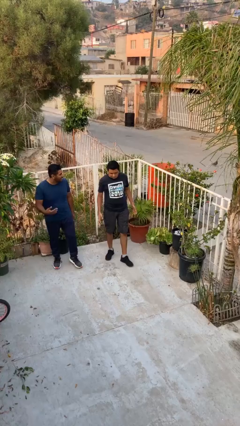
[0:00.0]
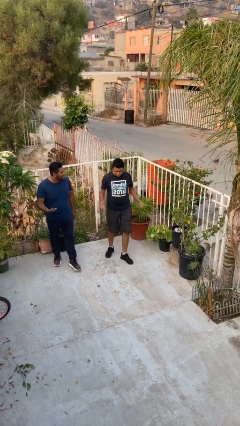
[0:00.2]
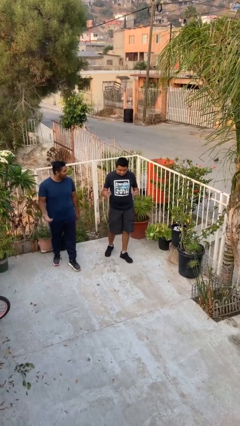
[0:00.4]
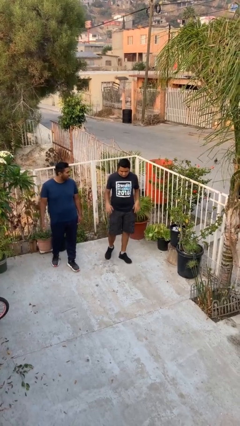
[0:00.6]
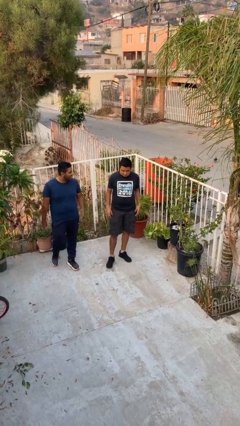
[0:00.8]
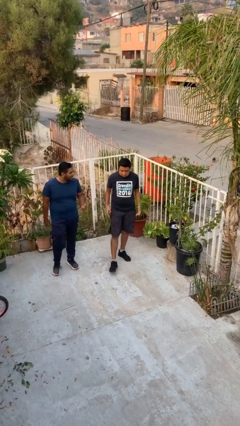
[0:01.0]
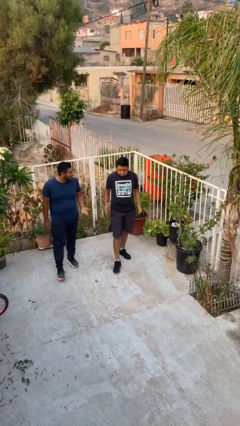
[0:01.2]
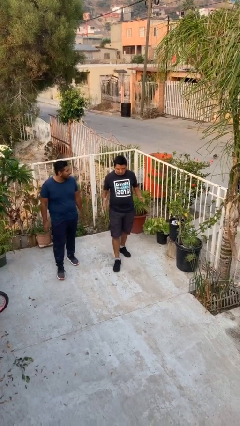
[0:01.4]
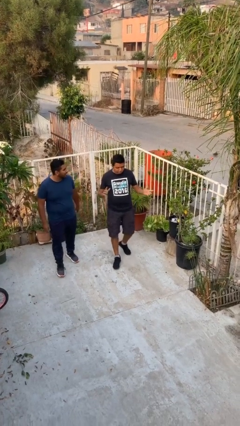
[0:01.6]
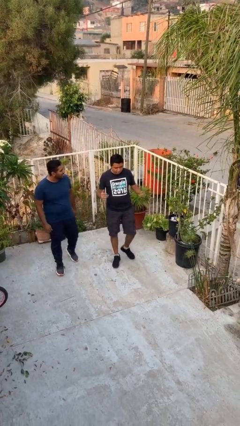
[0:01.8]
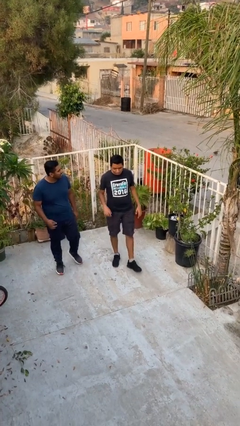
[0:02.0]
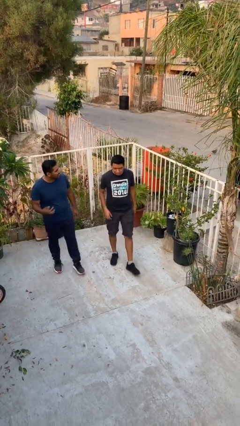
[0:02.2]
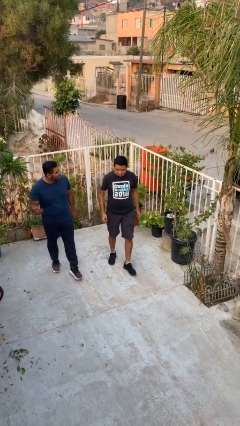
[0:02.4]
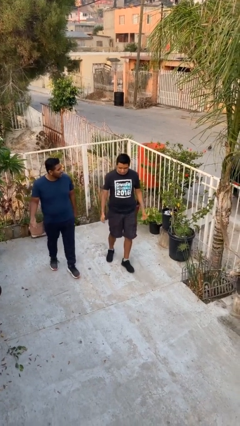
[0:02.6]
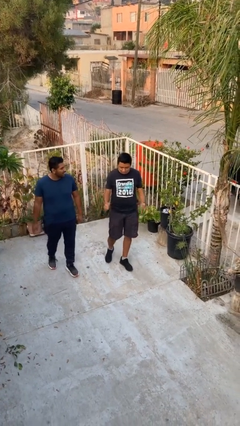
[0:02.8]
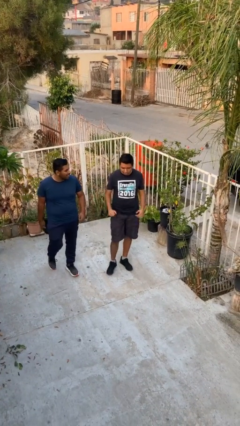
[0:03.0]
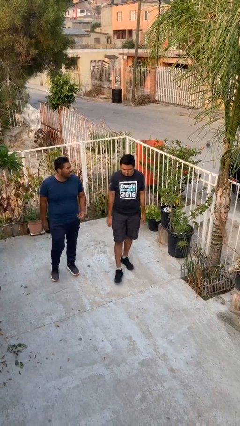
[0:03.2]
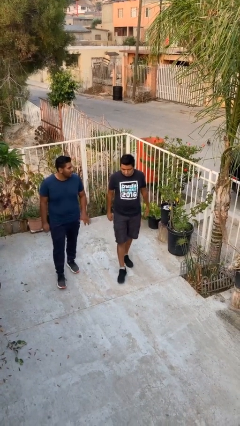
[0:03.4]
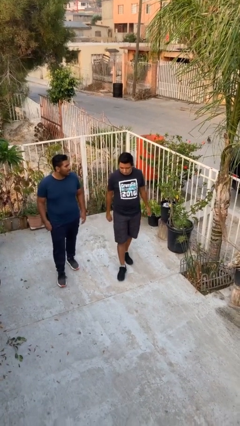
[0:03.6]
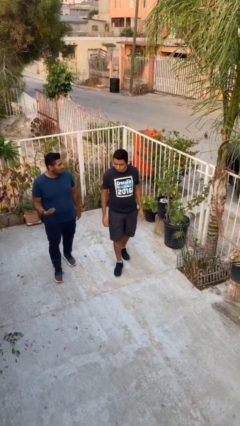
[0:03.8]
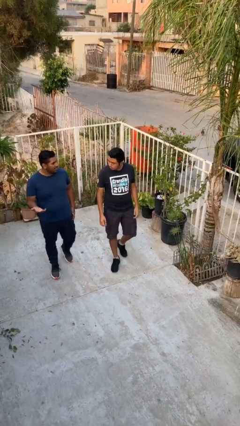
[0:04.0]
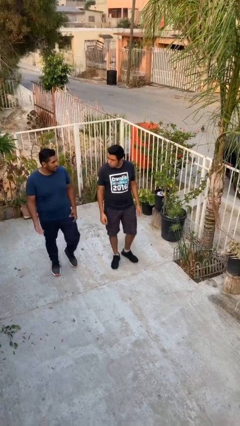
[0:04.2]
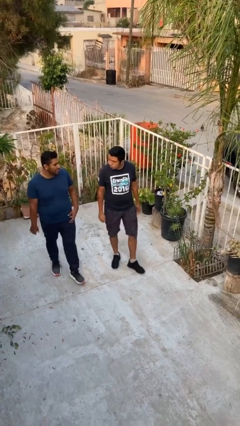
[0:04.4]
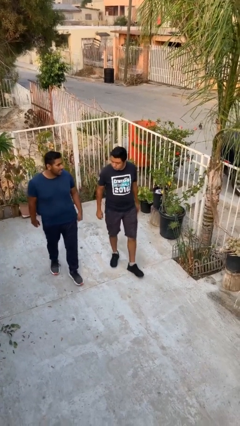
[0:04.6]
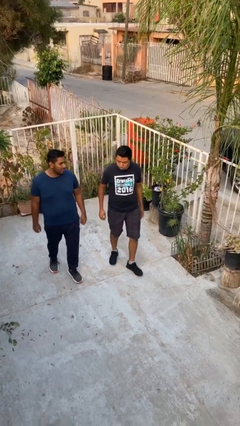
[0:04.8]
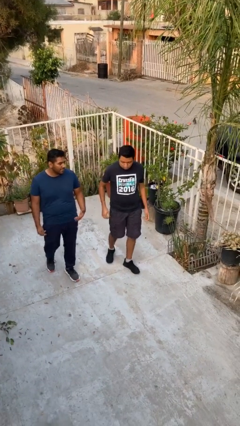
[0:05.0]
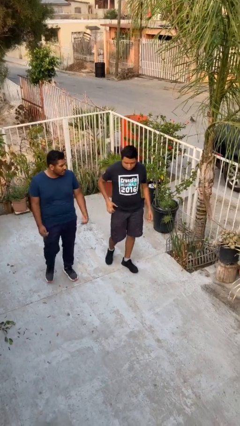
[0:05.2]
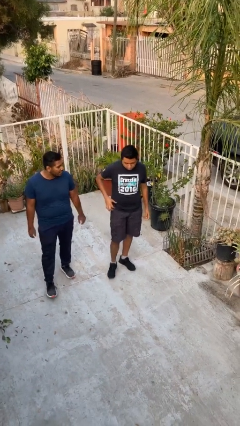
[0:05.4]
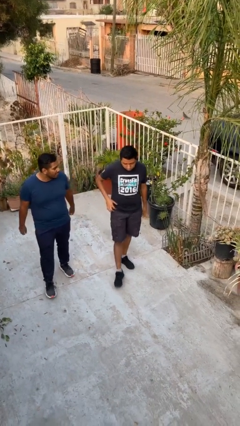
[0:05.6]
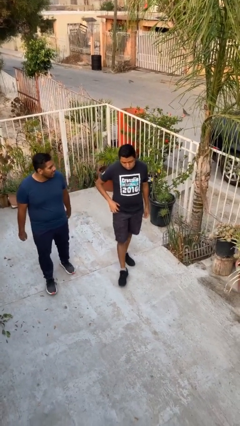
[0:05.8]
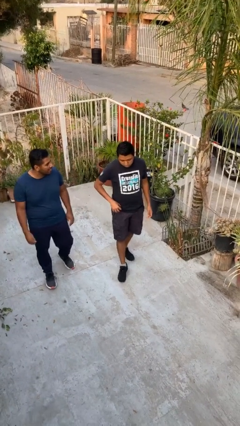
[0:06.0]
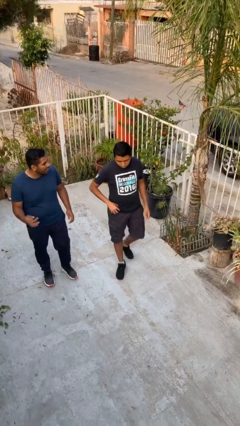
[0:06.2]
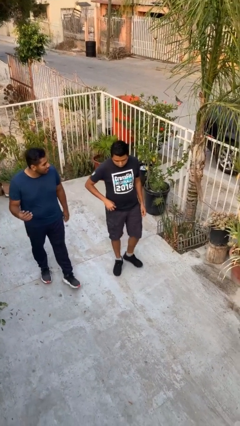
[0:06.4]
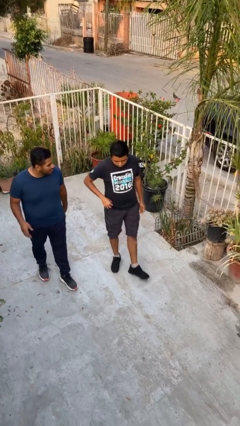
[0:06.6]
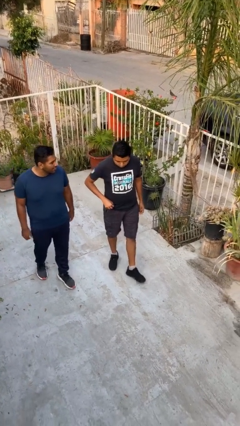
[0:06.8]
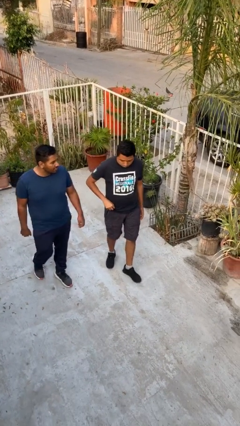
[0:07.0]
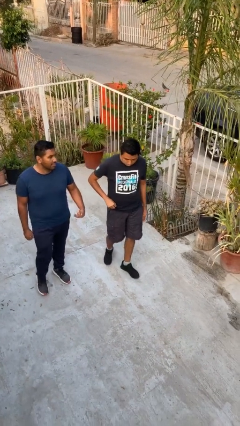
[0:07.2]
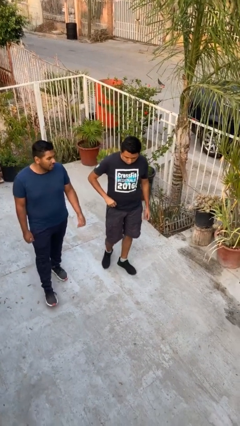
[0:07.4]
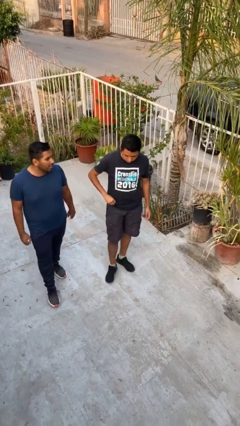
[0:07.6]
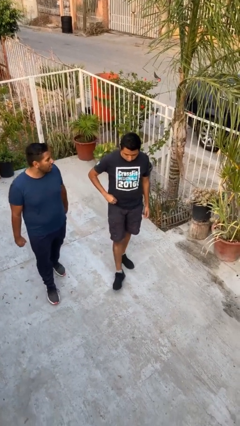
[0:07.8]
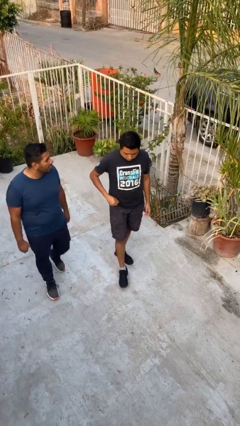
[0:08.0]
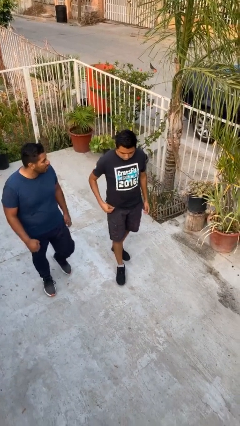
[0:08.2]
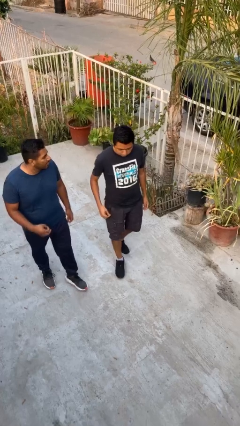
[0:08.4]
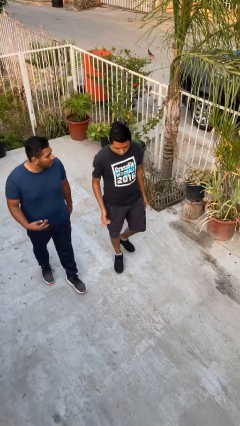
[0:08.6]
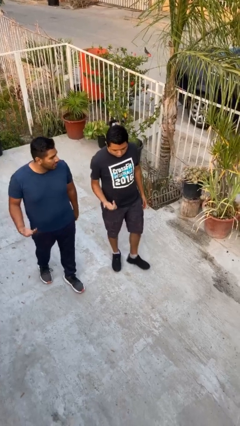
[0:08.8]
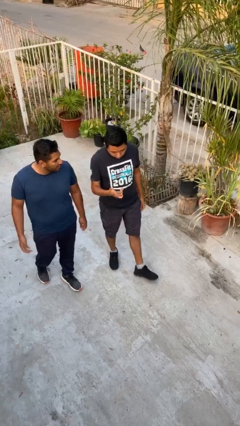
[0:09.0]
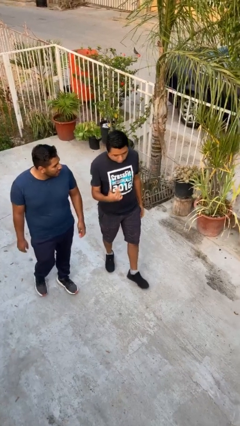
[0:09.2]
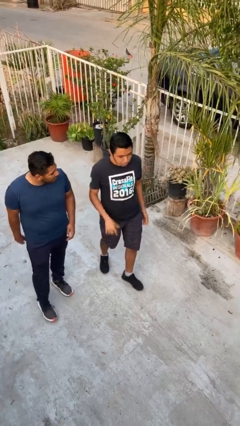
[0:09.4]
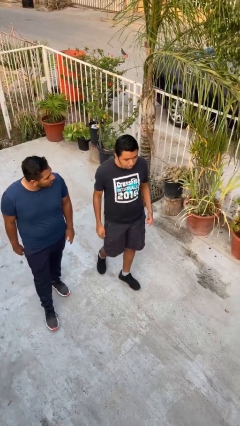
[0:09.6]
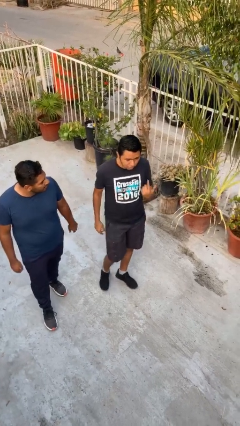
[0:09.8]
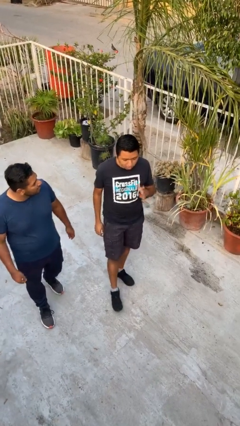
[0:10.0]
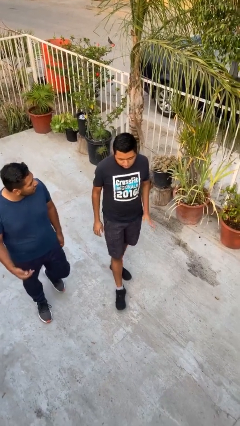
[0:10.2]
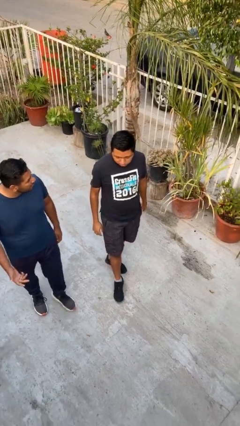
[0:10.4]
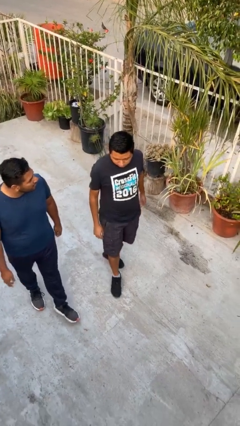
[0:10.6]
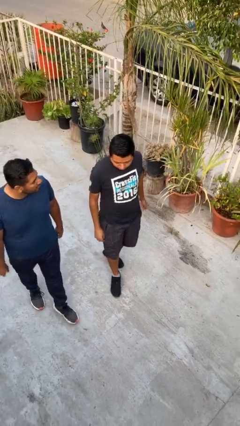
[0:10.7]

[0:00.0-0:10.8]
person talks to person

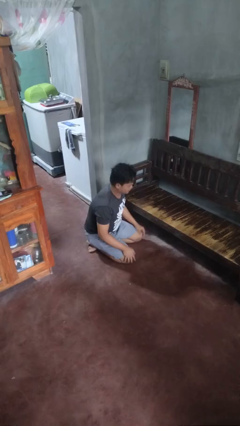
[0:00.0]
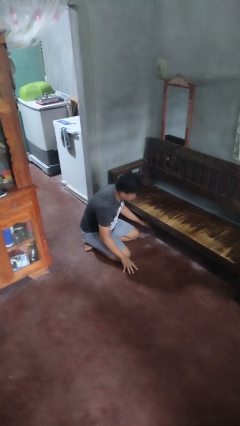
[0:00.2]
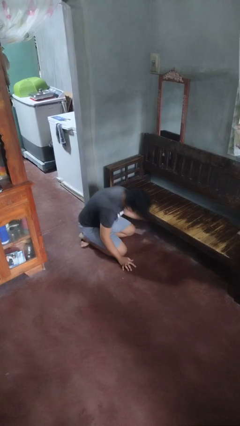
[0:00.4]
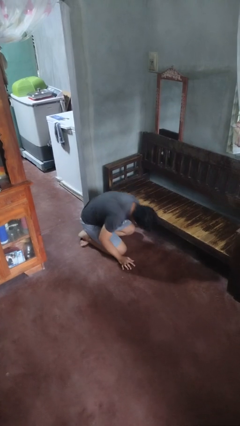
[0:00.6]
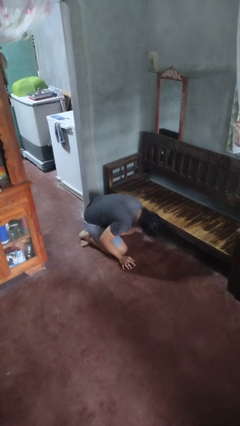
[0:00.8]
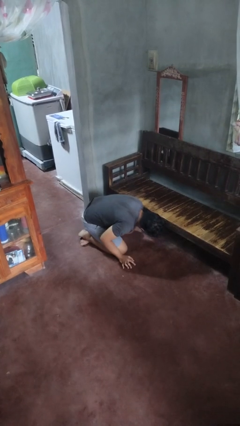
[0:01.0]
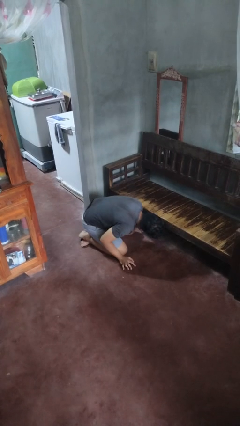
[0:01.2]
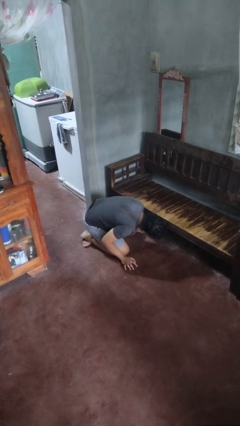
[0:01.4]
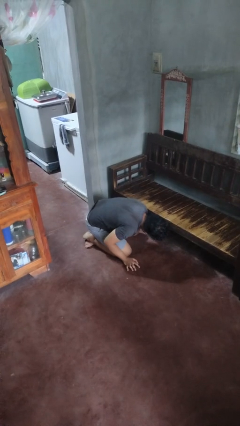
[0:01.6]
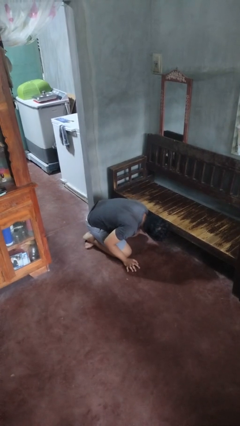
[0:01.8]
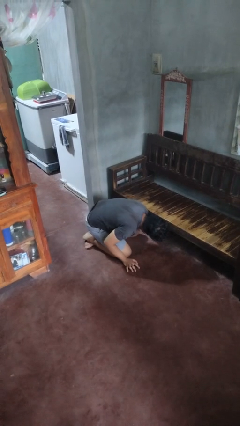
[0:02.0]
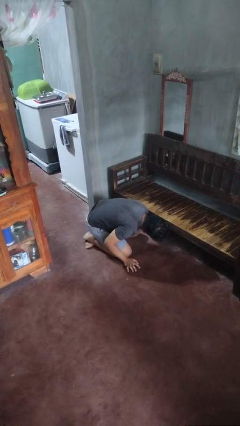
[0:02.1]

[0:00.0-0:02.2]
person searches under couch

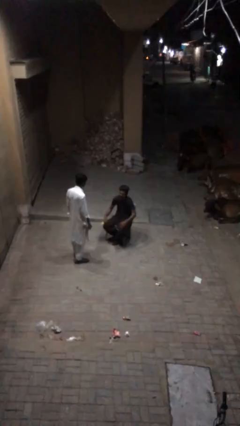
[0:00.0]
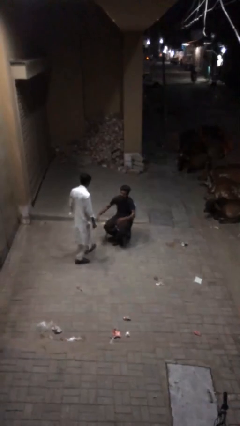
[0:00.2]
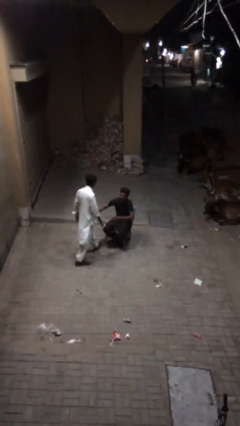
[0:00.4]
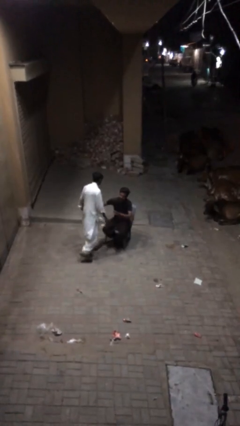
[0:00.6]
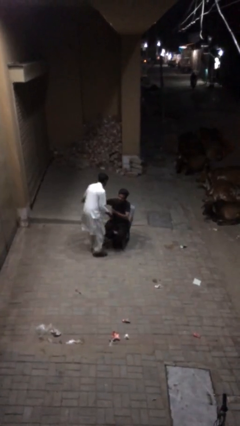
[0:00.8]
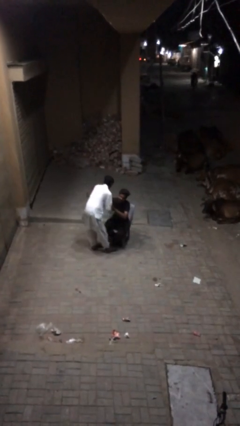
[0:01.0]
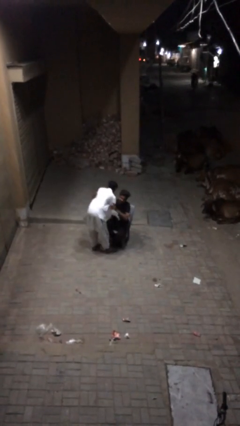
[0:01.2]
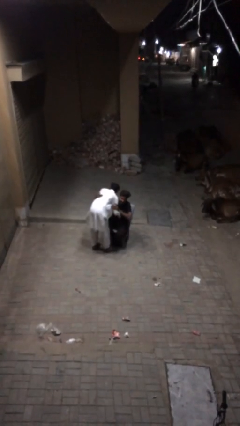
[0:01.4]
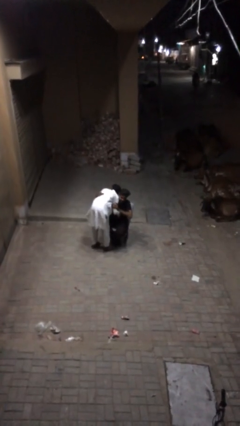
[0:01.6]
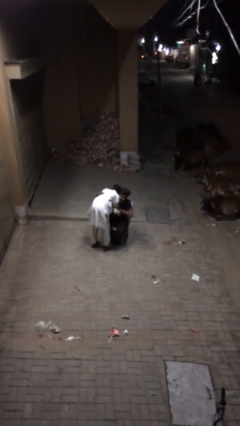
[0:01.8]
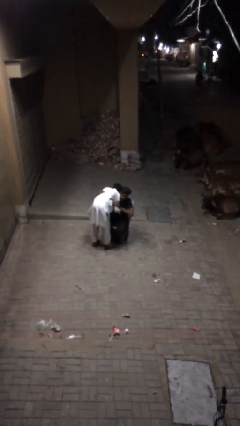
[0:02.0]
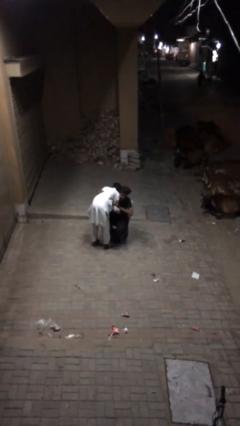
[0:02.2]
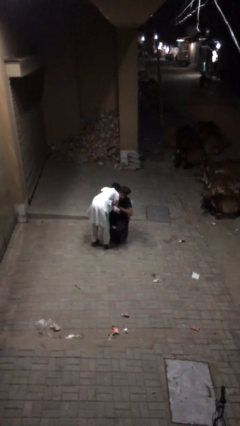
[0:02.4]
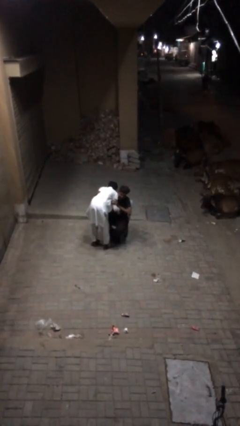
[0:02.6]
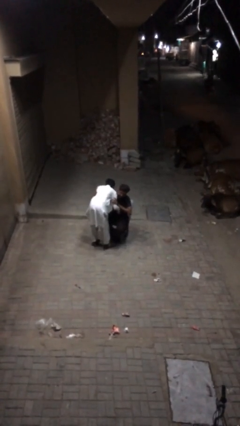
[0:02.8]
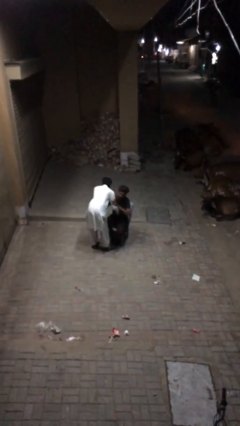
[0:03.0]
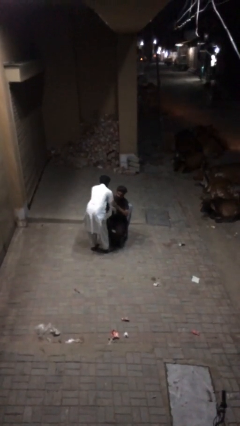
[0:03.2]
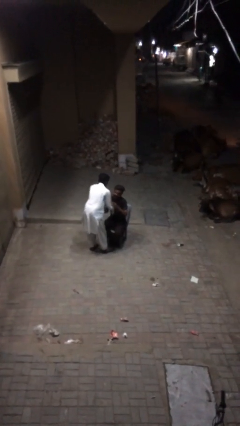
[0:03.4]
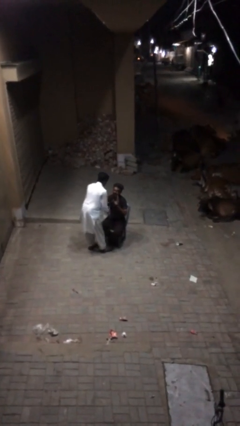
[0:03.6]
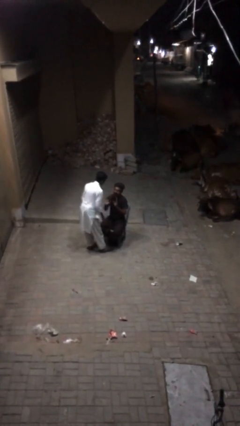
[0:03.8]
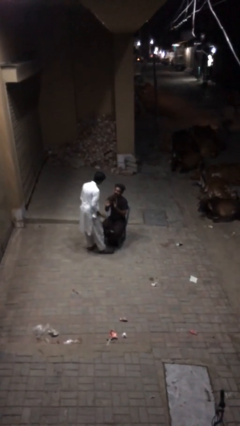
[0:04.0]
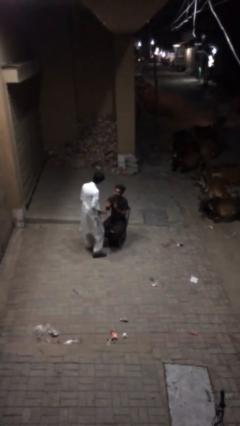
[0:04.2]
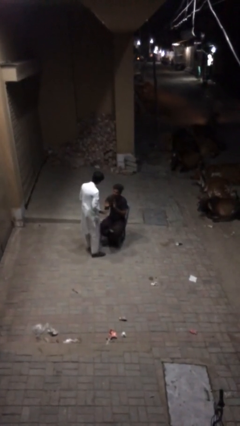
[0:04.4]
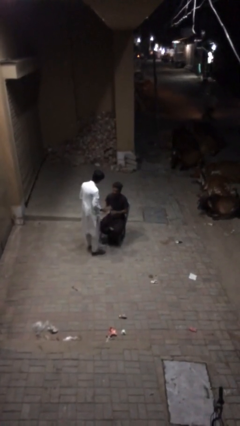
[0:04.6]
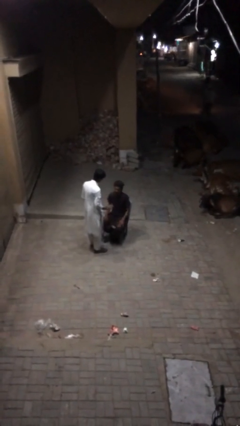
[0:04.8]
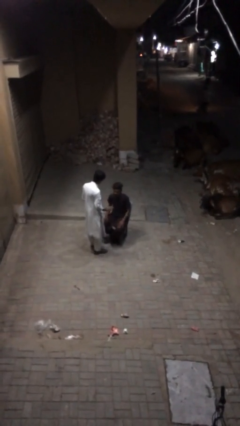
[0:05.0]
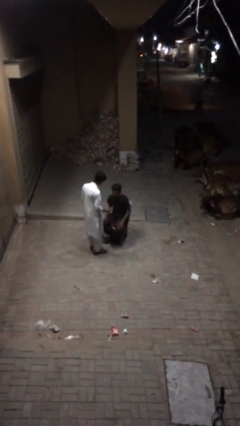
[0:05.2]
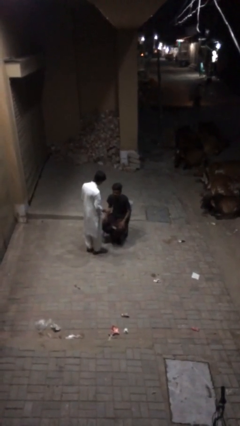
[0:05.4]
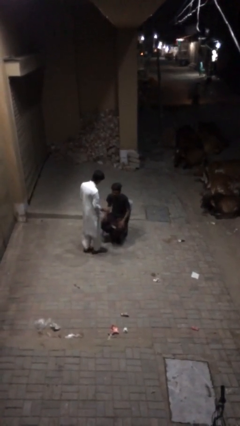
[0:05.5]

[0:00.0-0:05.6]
person embraces person
